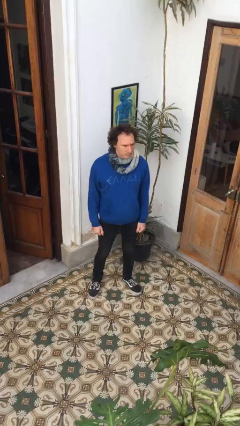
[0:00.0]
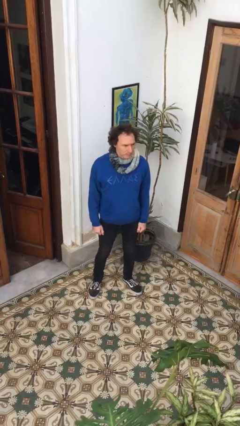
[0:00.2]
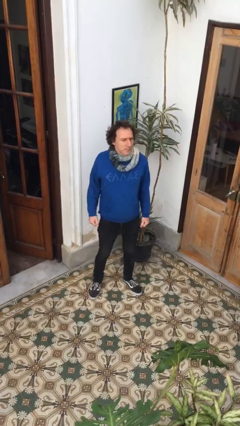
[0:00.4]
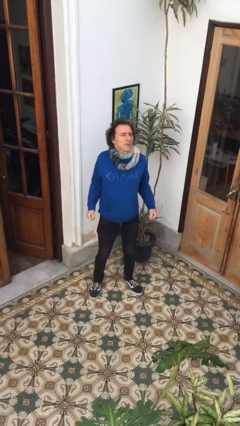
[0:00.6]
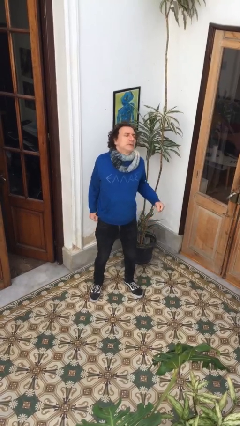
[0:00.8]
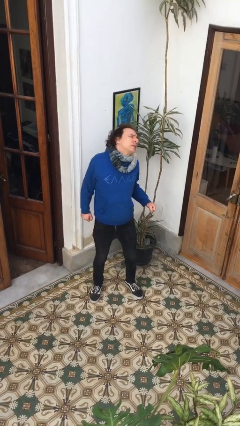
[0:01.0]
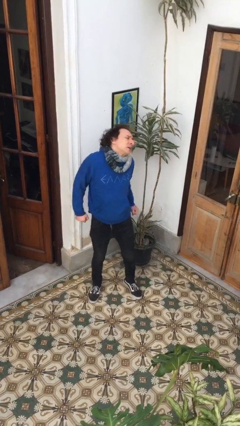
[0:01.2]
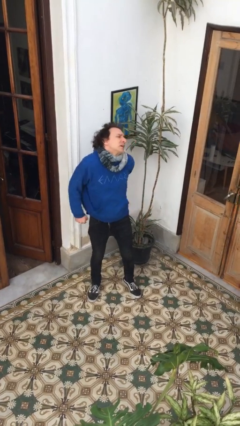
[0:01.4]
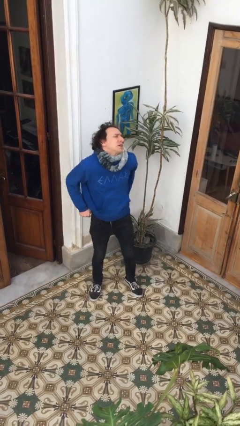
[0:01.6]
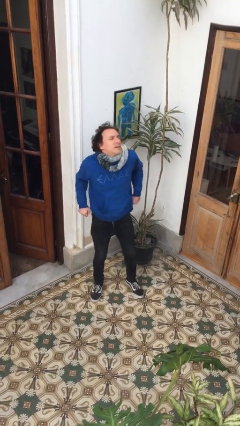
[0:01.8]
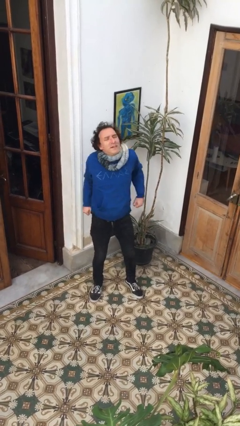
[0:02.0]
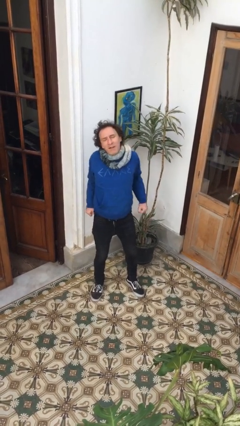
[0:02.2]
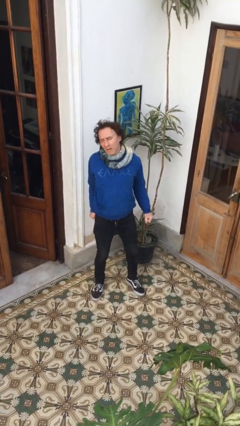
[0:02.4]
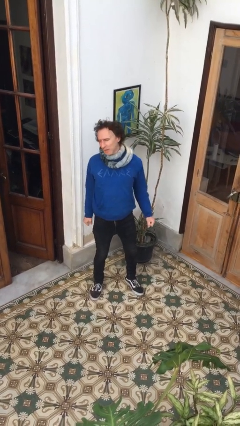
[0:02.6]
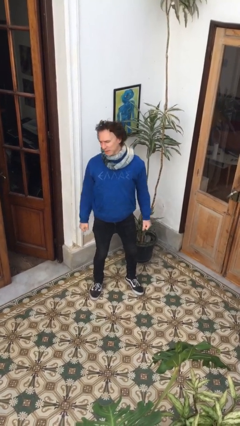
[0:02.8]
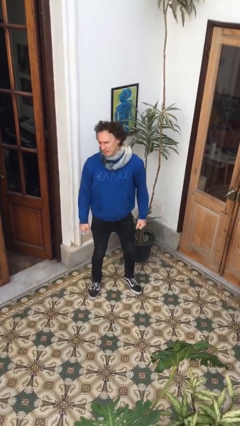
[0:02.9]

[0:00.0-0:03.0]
person stretches back

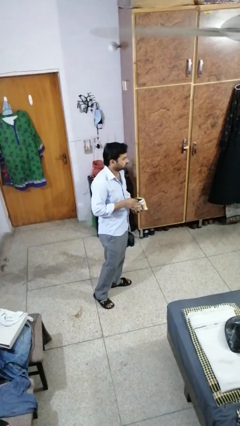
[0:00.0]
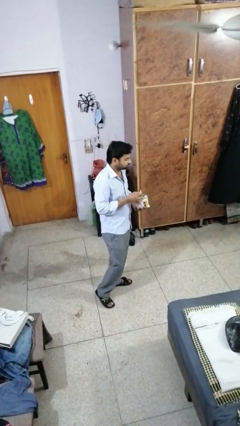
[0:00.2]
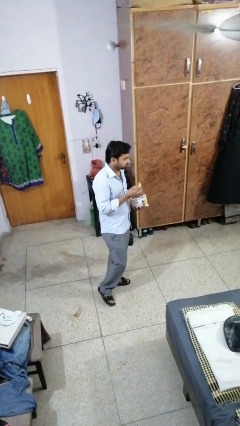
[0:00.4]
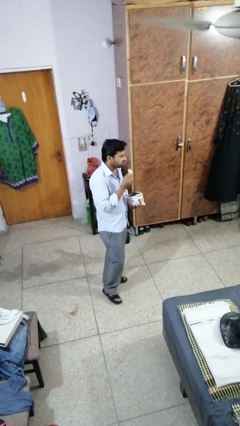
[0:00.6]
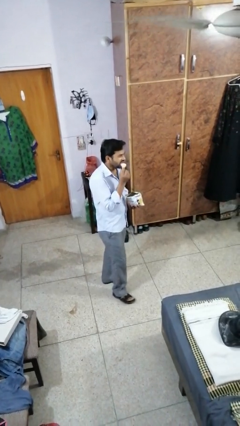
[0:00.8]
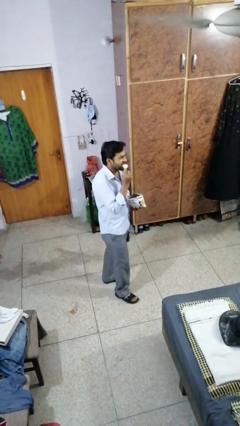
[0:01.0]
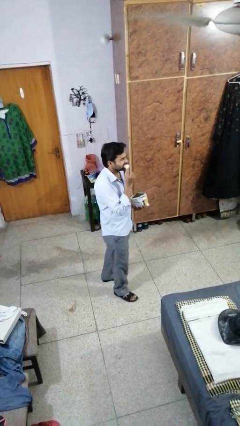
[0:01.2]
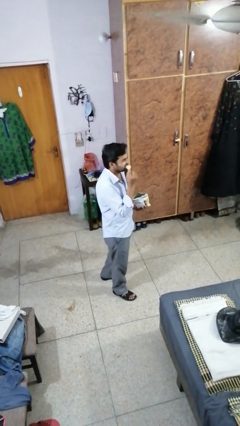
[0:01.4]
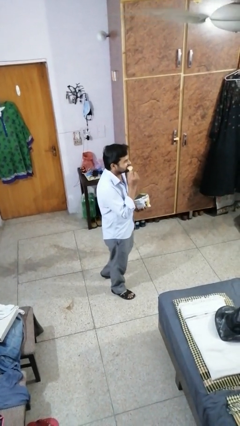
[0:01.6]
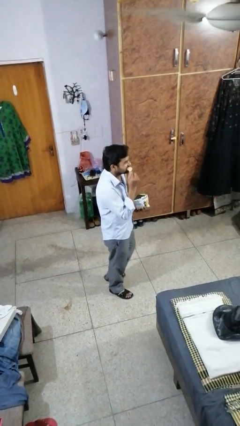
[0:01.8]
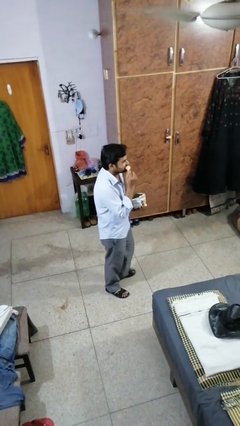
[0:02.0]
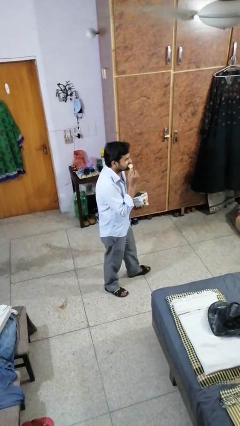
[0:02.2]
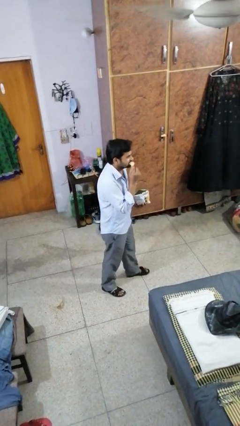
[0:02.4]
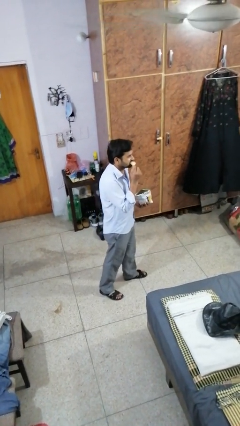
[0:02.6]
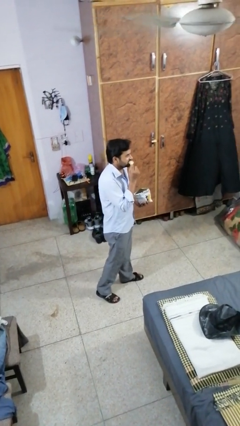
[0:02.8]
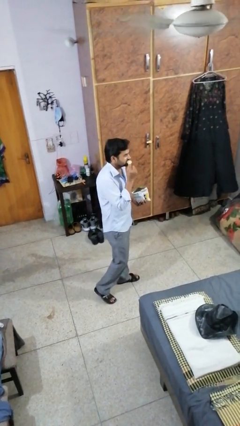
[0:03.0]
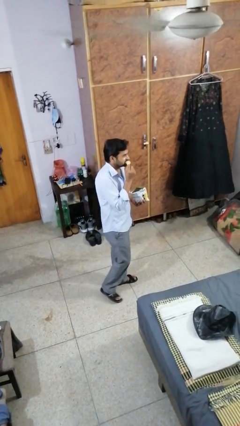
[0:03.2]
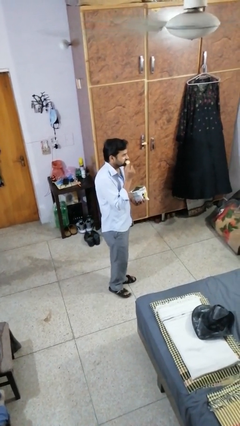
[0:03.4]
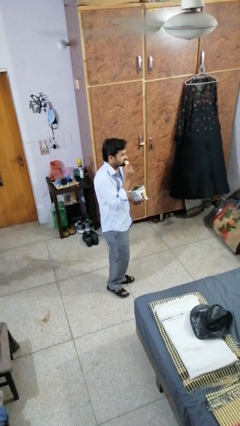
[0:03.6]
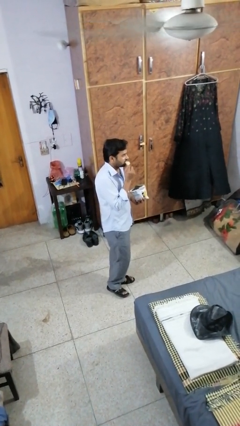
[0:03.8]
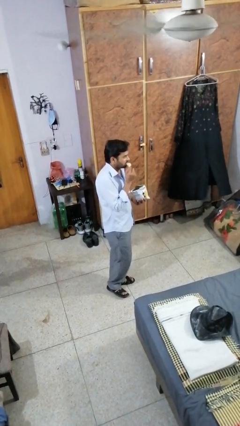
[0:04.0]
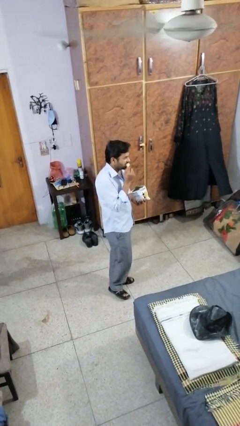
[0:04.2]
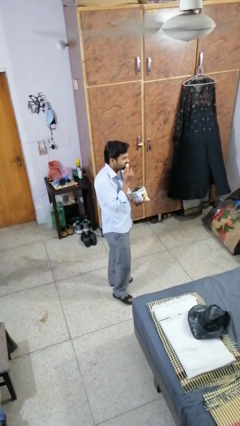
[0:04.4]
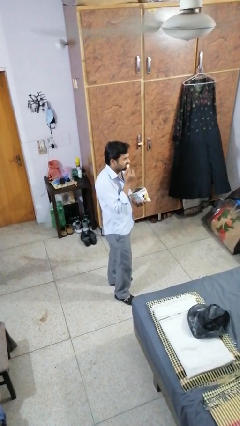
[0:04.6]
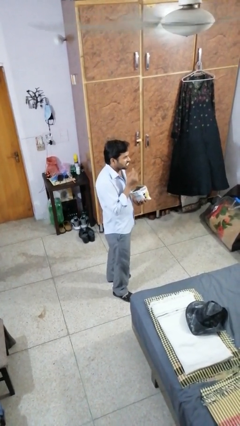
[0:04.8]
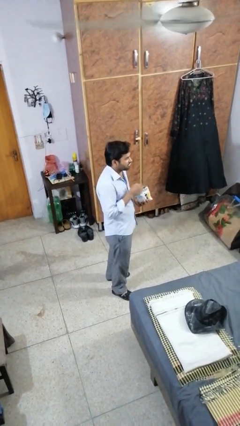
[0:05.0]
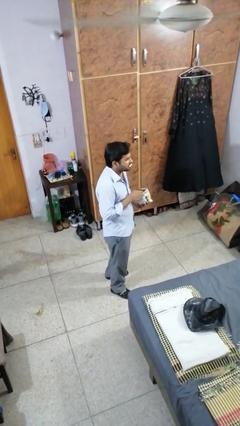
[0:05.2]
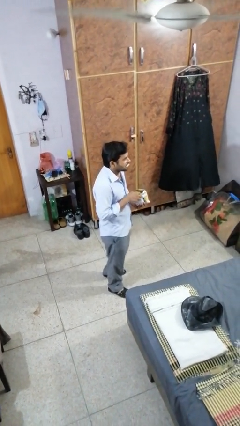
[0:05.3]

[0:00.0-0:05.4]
person eats snack from bag

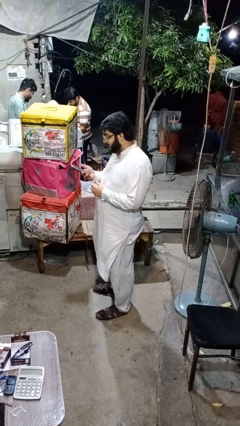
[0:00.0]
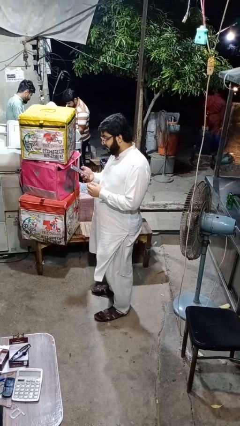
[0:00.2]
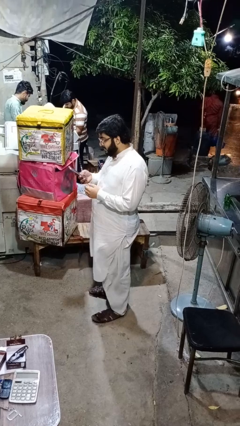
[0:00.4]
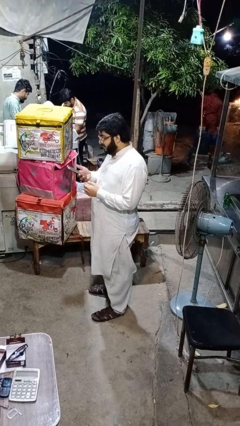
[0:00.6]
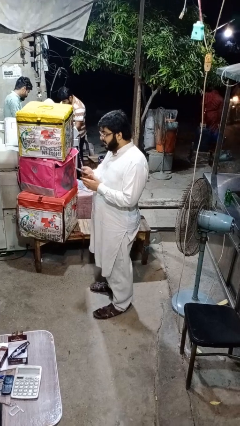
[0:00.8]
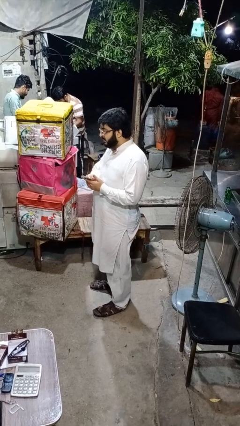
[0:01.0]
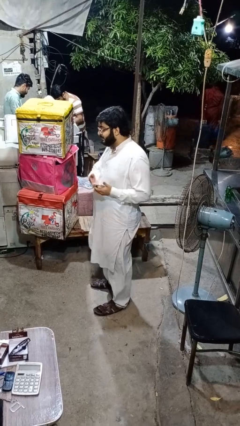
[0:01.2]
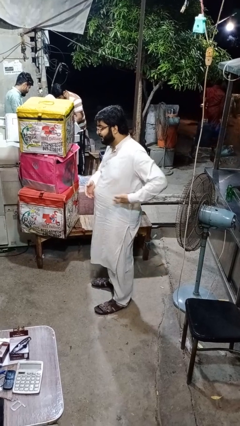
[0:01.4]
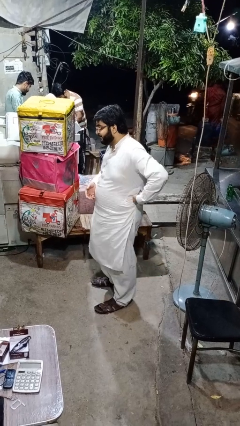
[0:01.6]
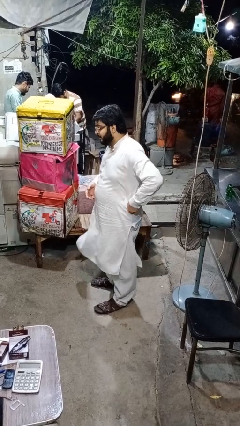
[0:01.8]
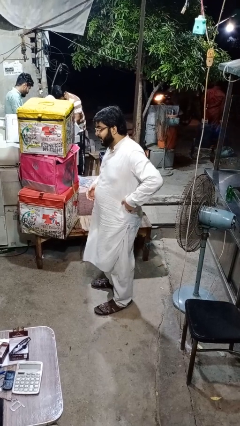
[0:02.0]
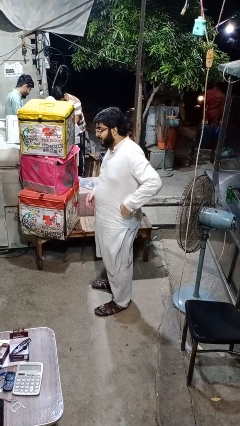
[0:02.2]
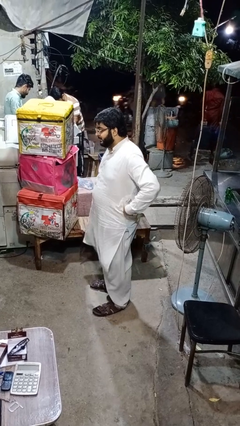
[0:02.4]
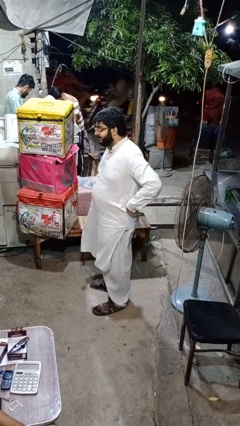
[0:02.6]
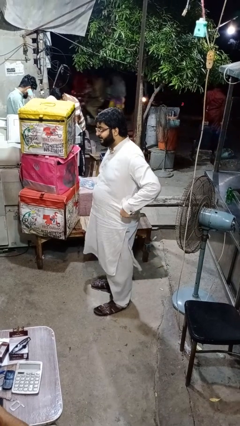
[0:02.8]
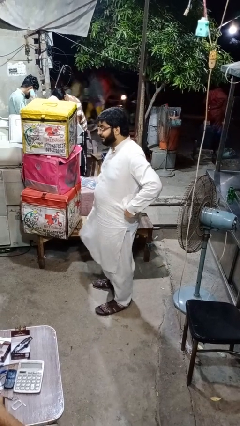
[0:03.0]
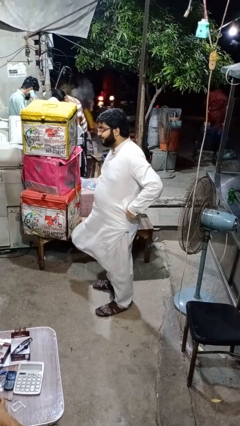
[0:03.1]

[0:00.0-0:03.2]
person puts phone into pocket

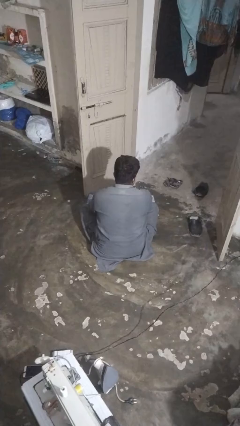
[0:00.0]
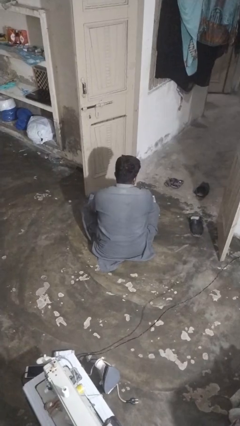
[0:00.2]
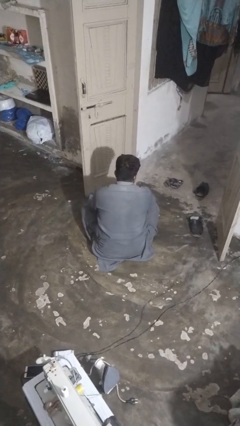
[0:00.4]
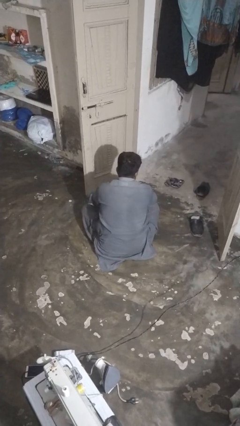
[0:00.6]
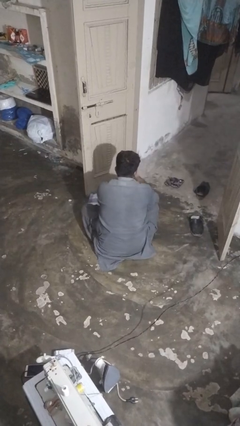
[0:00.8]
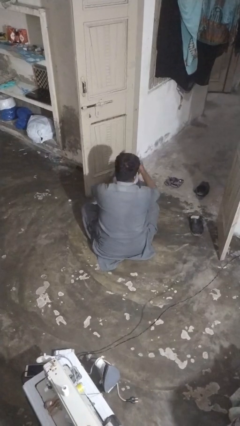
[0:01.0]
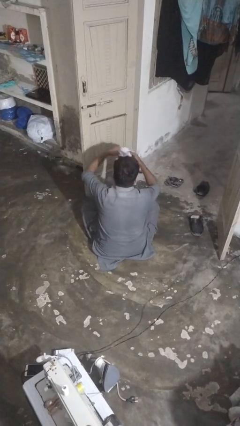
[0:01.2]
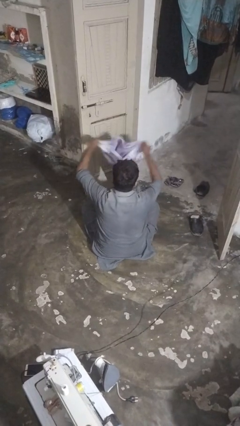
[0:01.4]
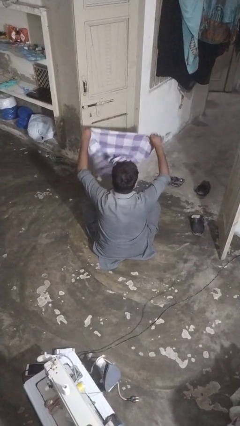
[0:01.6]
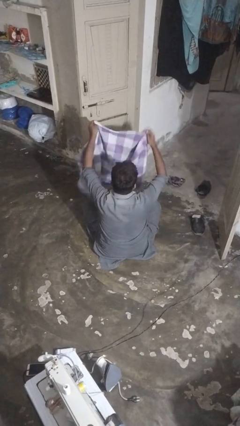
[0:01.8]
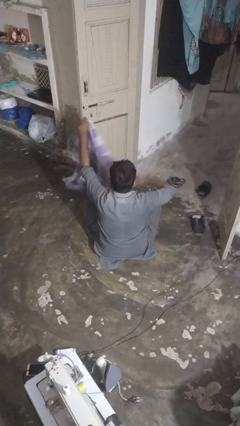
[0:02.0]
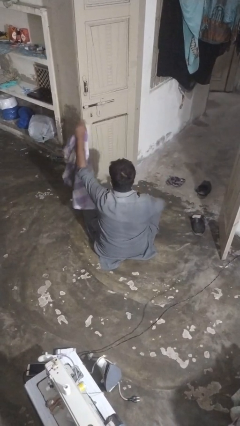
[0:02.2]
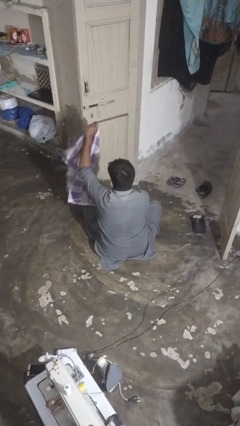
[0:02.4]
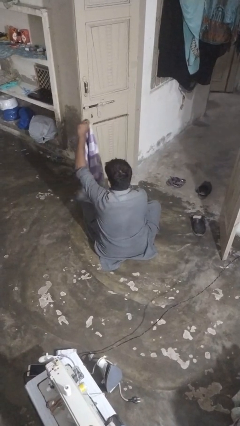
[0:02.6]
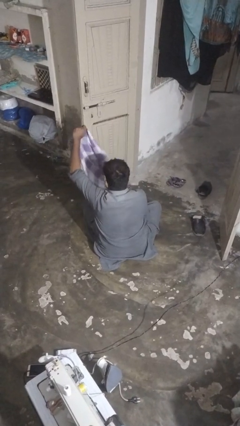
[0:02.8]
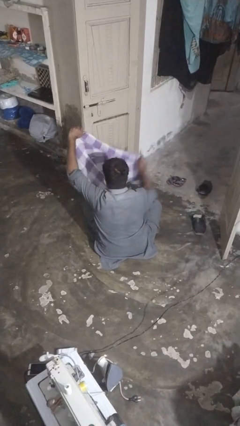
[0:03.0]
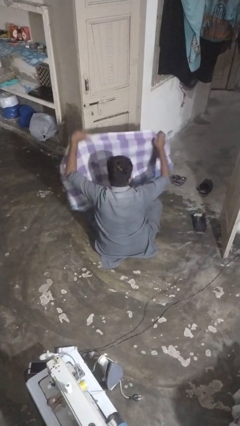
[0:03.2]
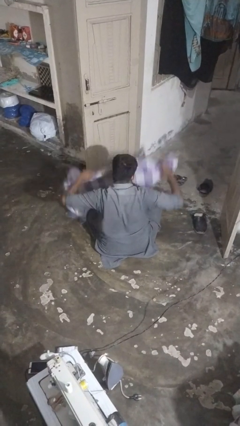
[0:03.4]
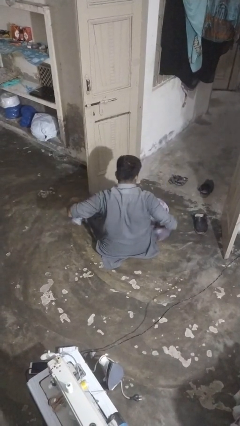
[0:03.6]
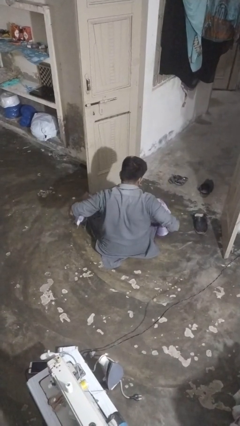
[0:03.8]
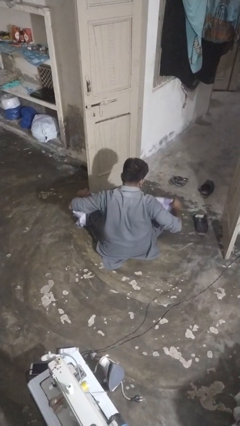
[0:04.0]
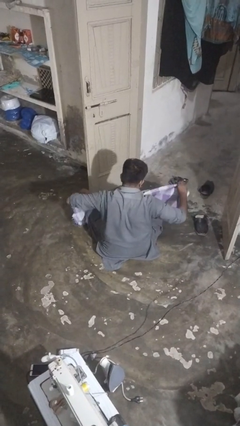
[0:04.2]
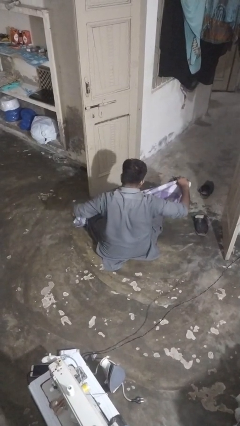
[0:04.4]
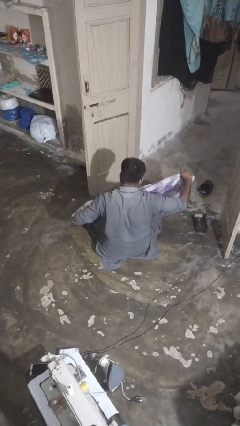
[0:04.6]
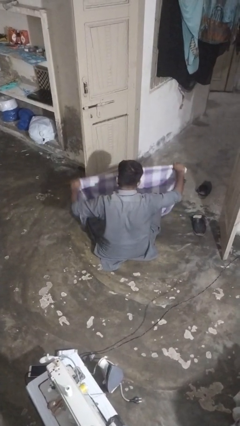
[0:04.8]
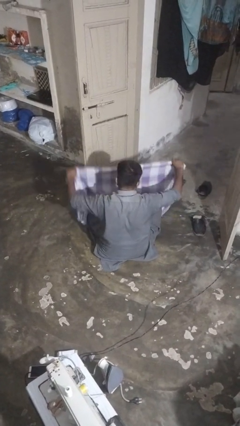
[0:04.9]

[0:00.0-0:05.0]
person unfolds blanket

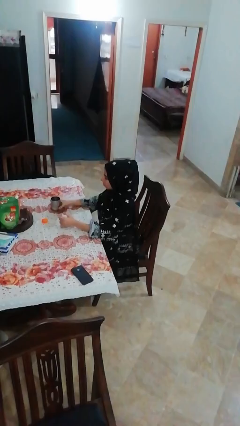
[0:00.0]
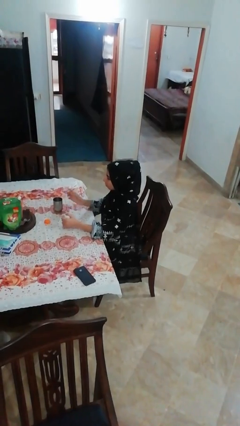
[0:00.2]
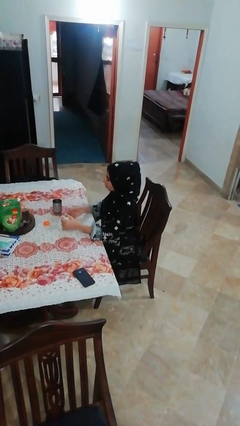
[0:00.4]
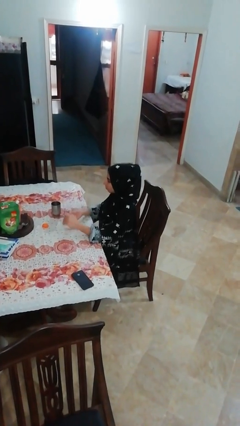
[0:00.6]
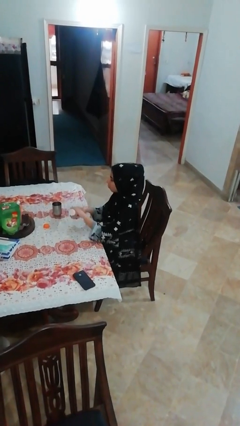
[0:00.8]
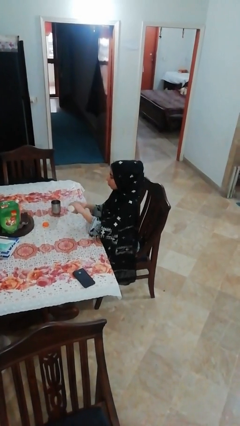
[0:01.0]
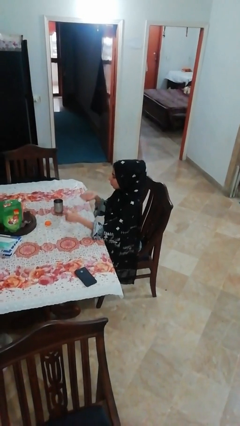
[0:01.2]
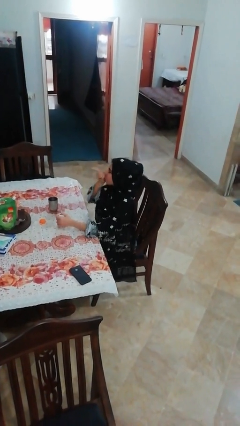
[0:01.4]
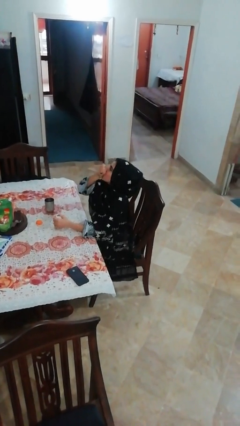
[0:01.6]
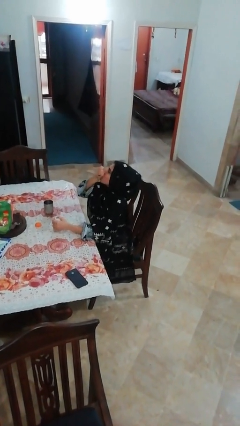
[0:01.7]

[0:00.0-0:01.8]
person takes medicine pills
